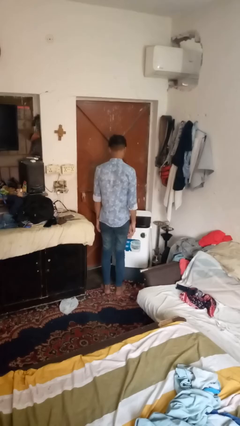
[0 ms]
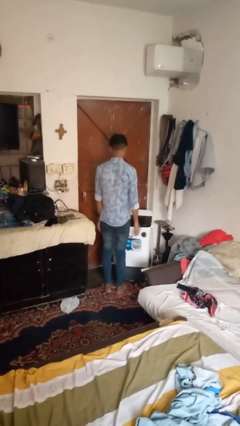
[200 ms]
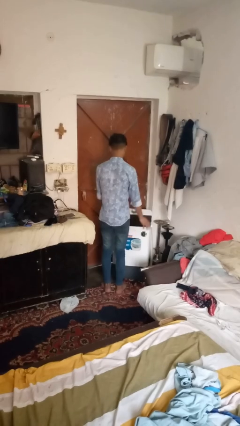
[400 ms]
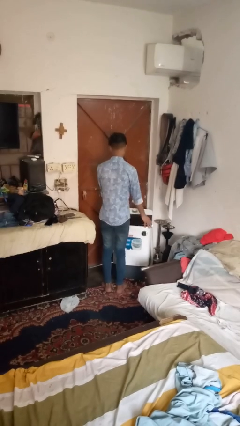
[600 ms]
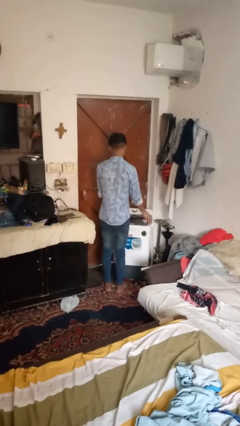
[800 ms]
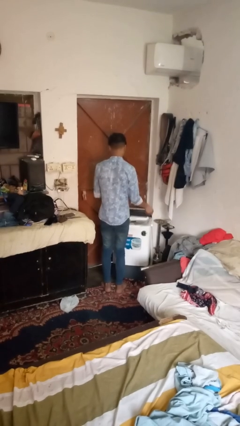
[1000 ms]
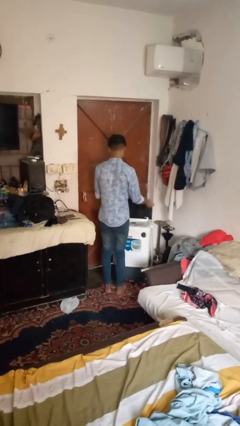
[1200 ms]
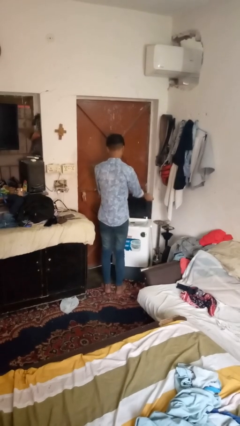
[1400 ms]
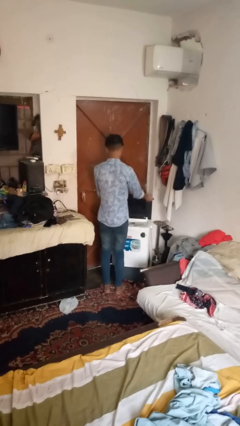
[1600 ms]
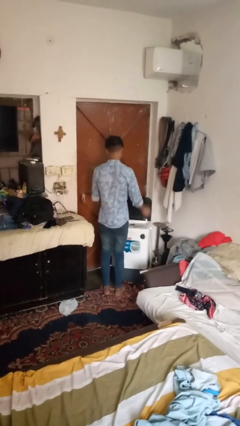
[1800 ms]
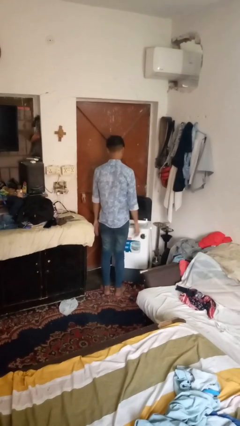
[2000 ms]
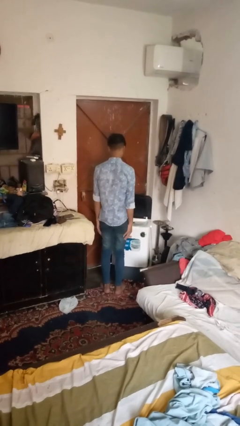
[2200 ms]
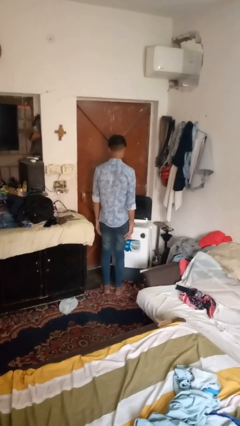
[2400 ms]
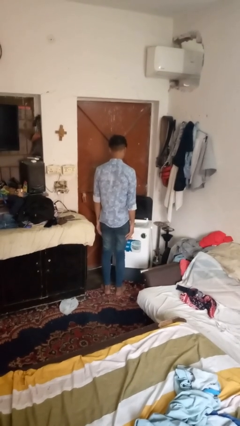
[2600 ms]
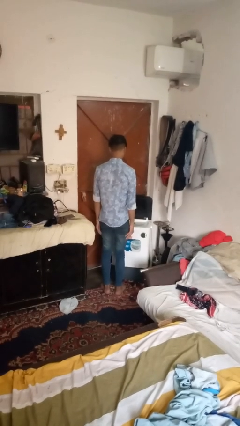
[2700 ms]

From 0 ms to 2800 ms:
person opens clothes washer

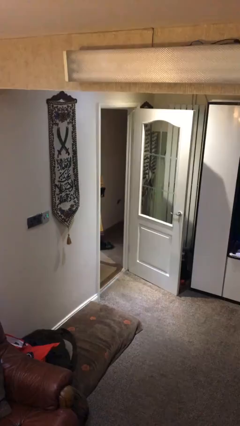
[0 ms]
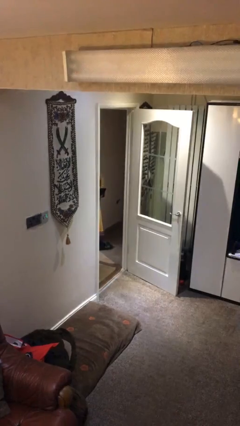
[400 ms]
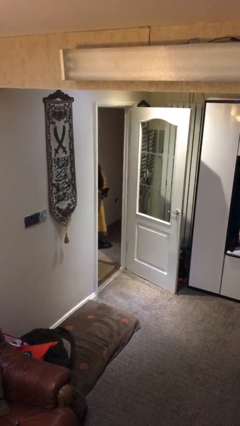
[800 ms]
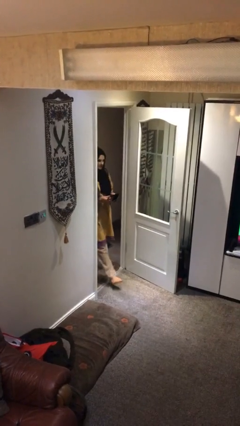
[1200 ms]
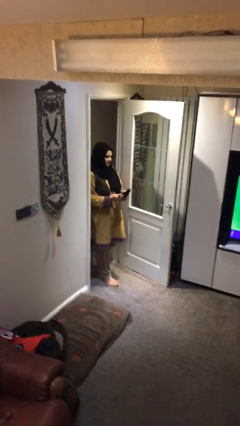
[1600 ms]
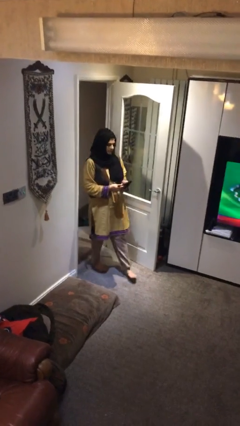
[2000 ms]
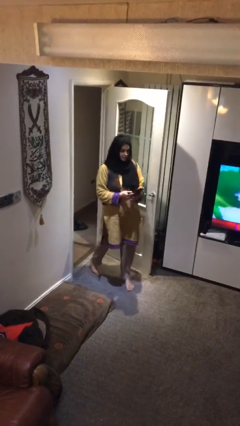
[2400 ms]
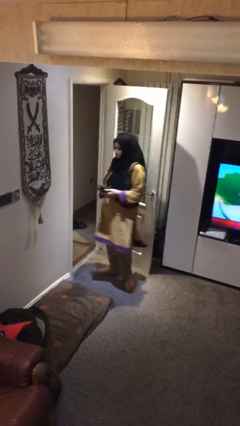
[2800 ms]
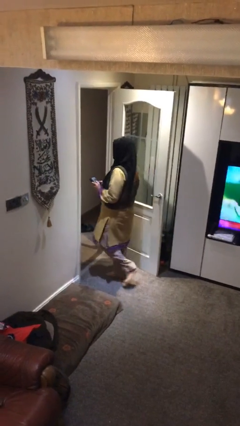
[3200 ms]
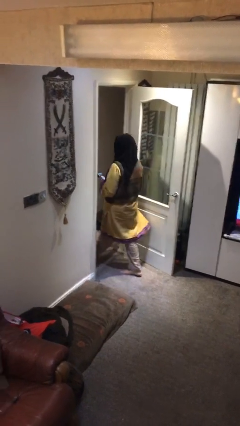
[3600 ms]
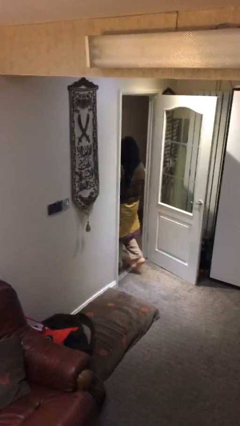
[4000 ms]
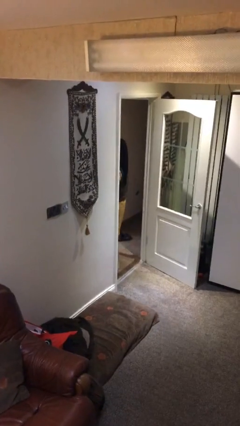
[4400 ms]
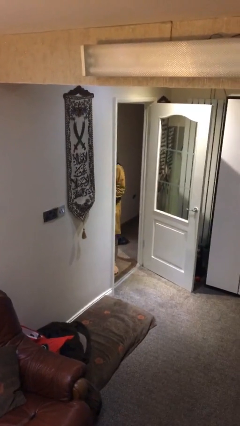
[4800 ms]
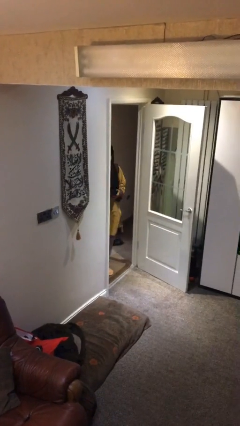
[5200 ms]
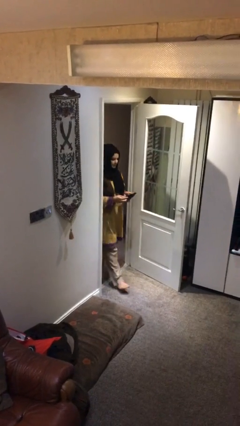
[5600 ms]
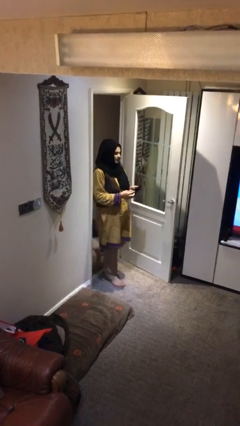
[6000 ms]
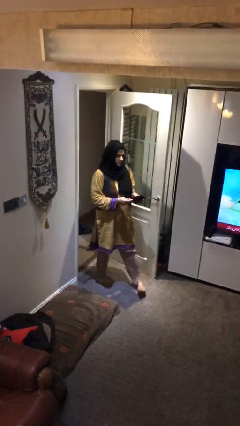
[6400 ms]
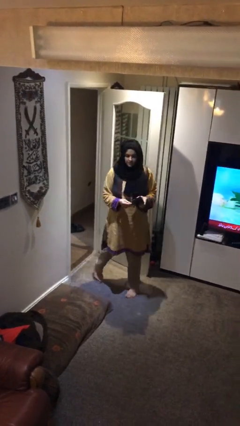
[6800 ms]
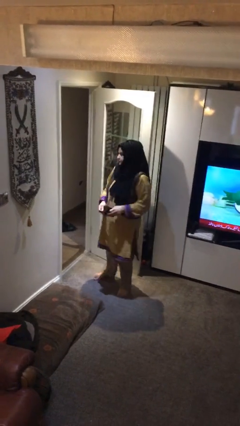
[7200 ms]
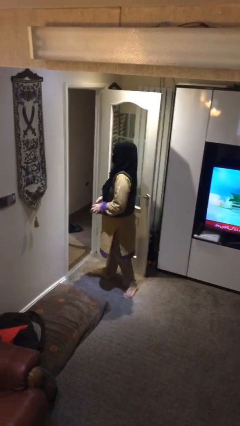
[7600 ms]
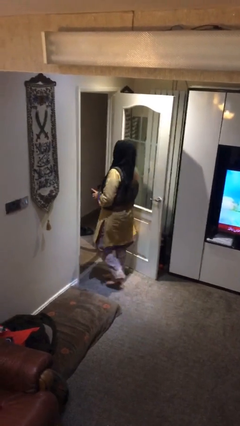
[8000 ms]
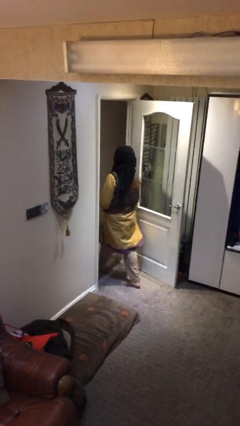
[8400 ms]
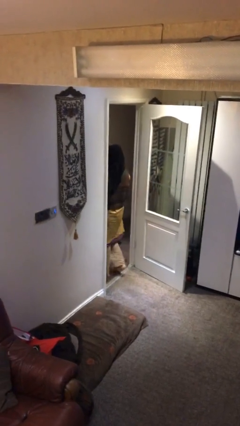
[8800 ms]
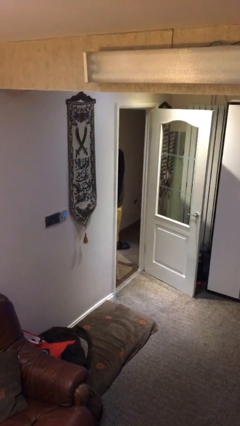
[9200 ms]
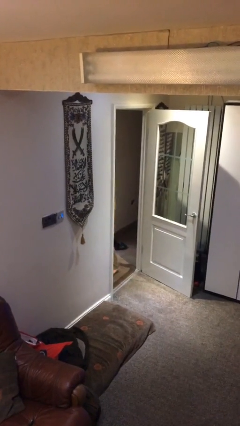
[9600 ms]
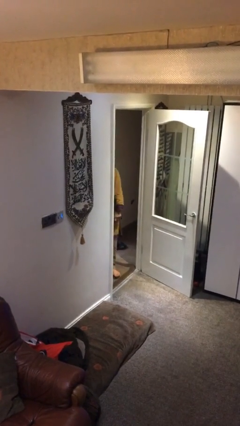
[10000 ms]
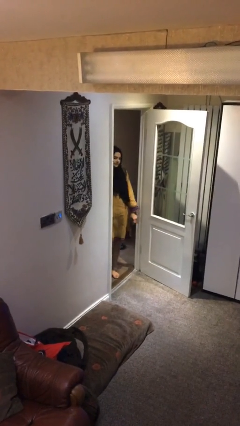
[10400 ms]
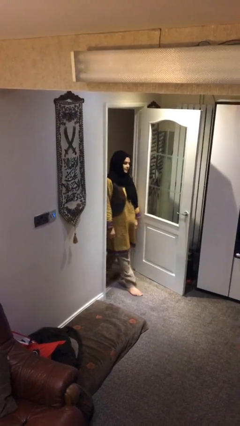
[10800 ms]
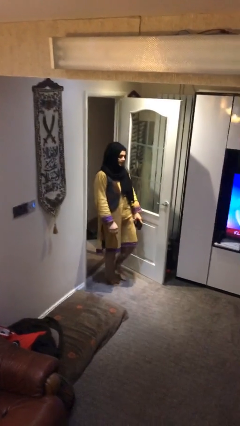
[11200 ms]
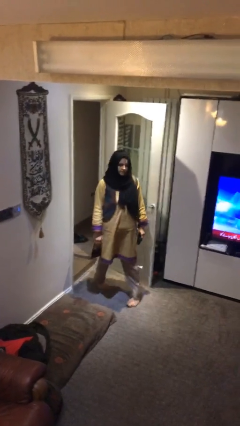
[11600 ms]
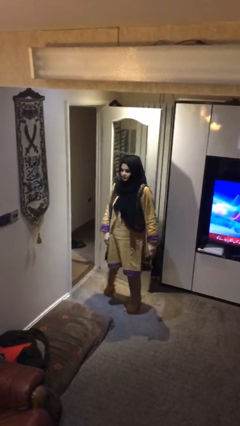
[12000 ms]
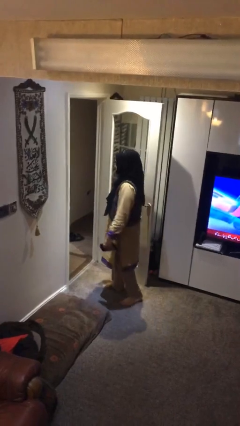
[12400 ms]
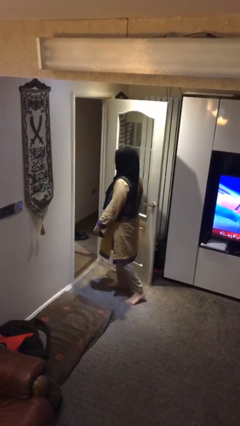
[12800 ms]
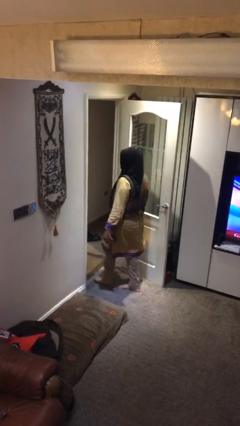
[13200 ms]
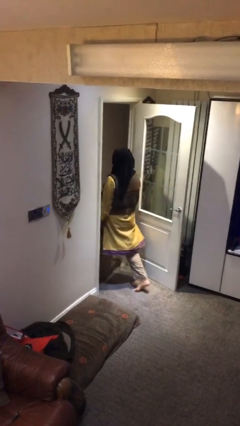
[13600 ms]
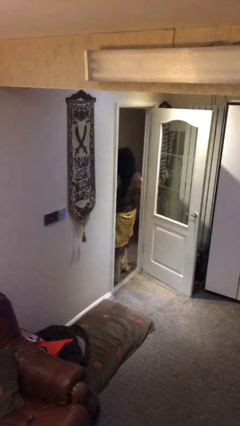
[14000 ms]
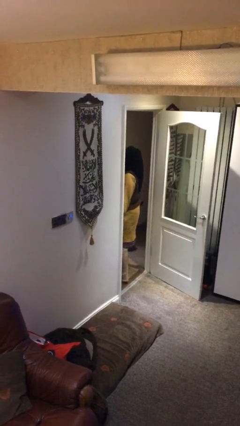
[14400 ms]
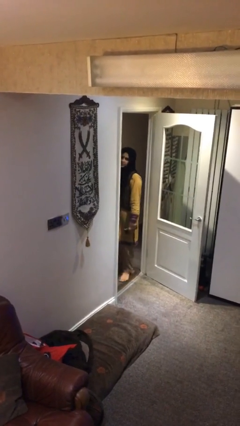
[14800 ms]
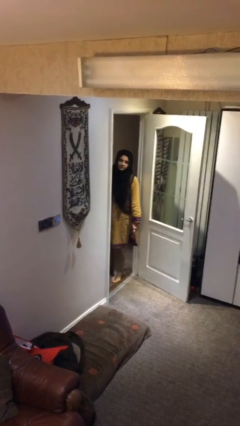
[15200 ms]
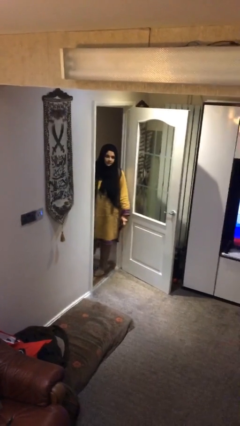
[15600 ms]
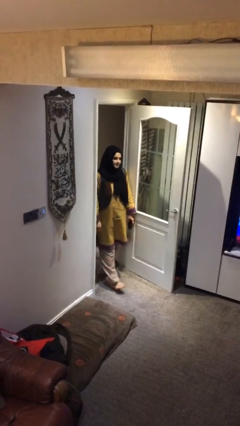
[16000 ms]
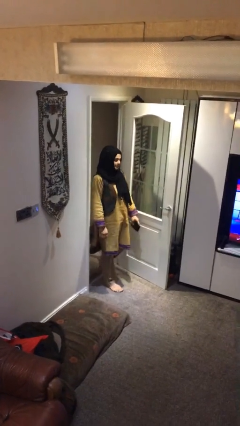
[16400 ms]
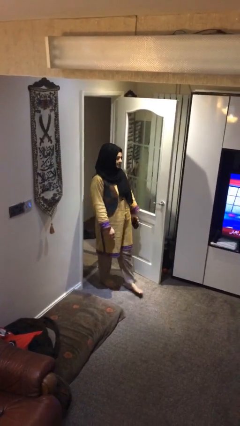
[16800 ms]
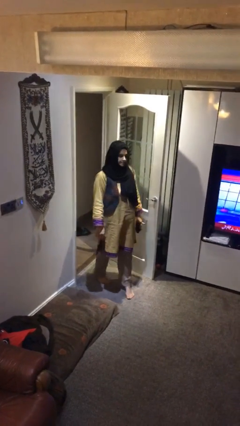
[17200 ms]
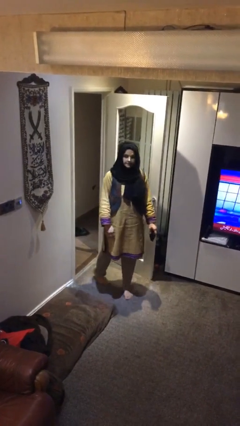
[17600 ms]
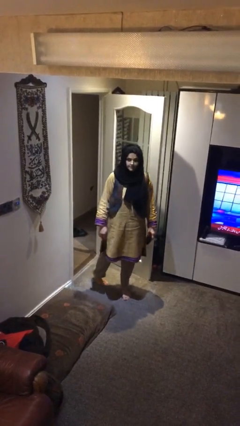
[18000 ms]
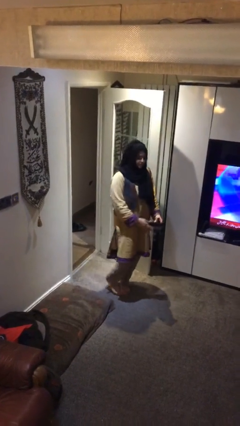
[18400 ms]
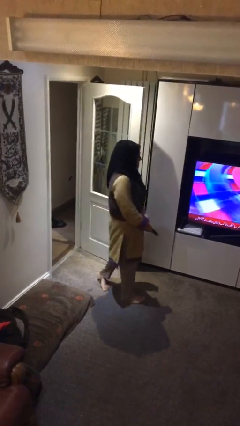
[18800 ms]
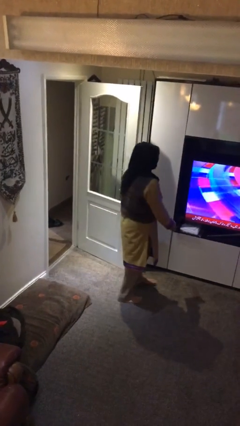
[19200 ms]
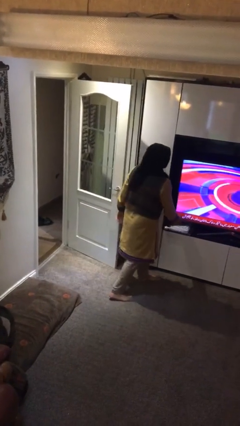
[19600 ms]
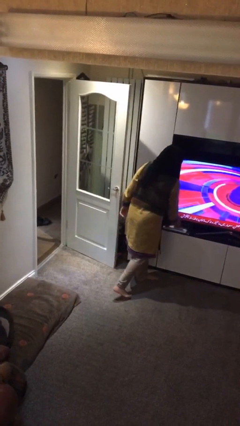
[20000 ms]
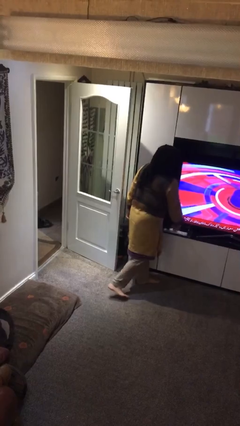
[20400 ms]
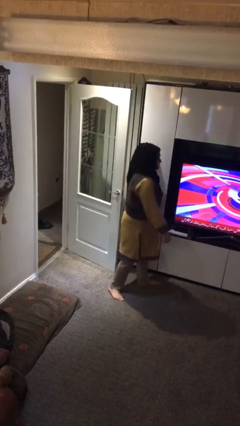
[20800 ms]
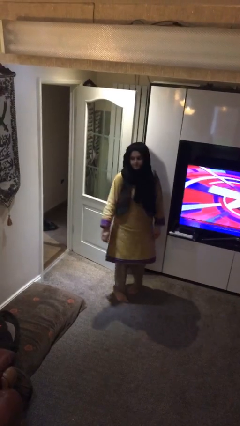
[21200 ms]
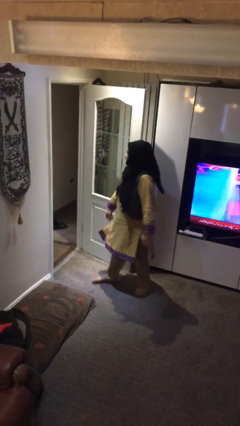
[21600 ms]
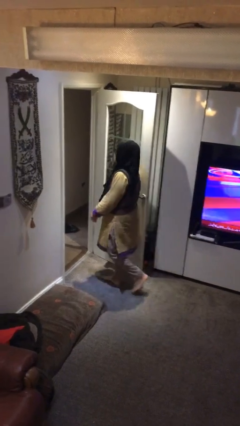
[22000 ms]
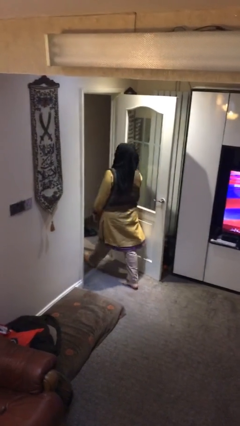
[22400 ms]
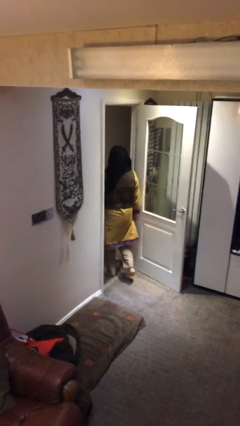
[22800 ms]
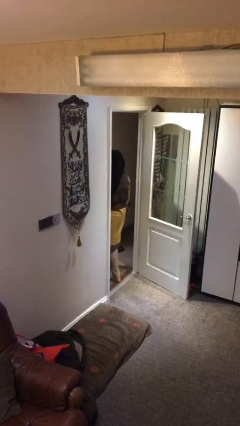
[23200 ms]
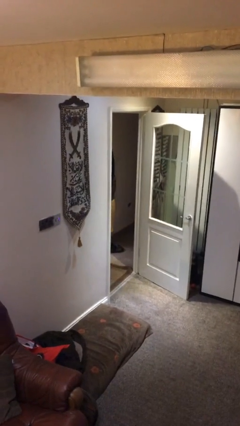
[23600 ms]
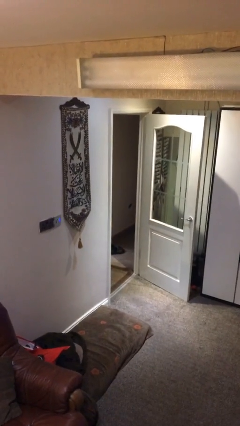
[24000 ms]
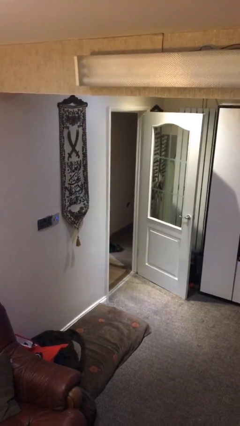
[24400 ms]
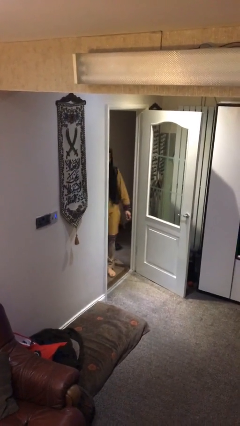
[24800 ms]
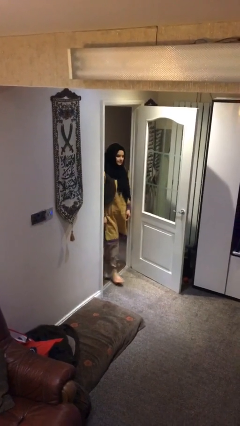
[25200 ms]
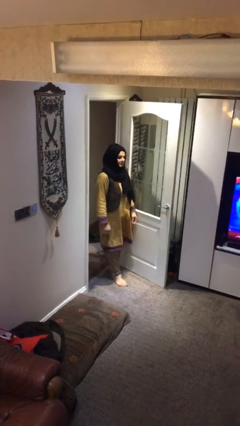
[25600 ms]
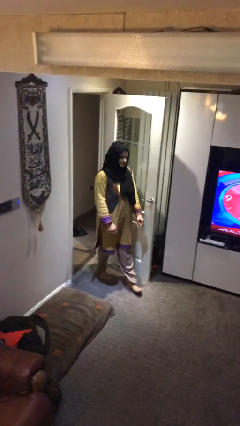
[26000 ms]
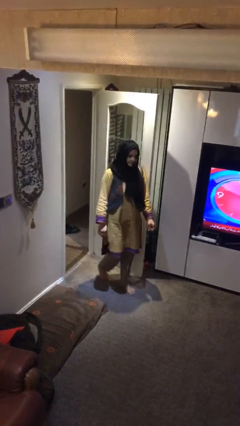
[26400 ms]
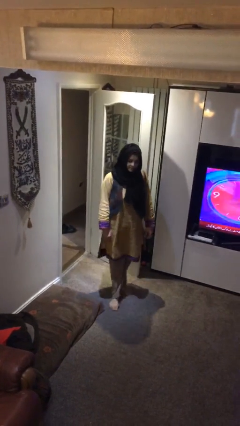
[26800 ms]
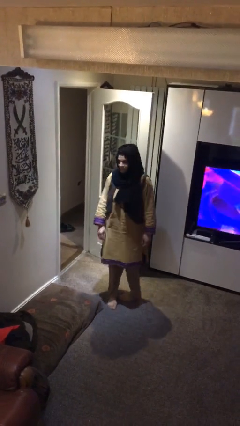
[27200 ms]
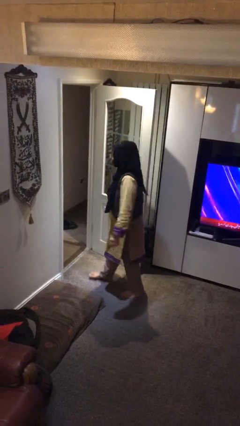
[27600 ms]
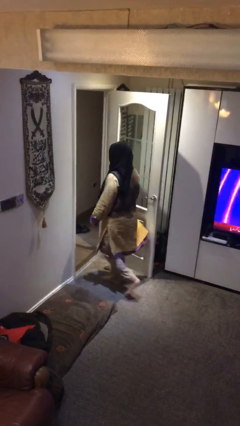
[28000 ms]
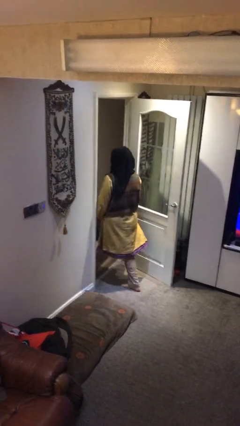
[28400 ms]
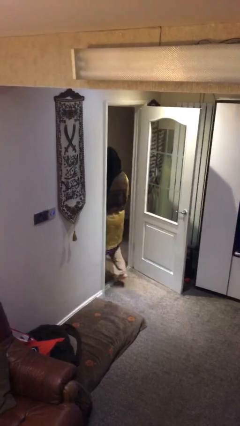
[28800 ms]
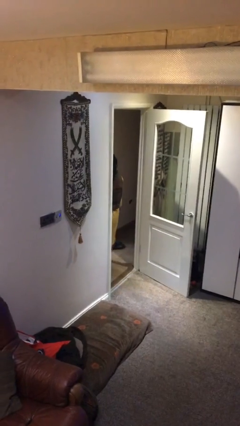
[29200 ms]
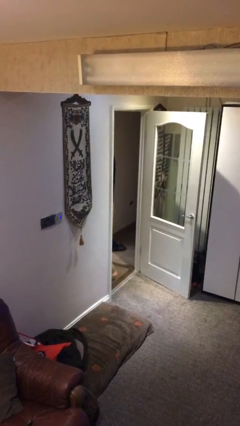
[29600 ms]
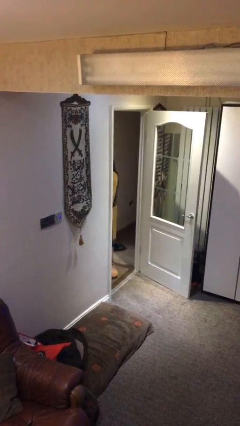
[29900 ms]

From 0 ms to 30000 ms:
person texts on phone

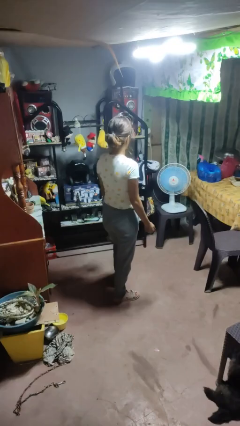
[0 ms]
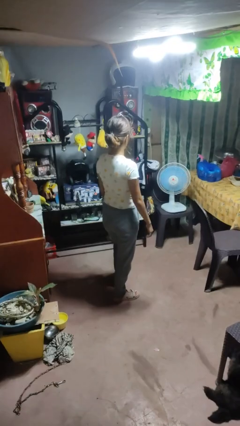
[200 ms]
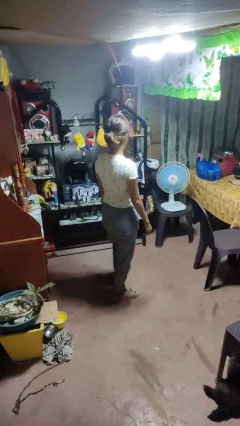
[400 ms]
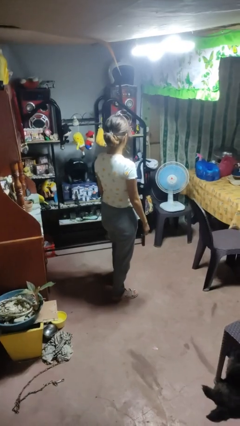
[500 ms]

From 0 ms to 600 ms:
person shrugs
